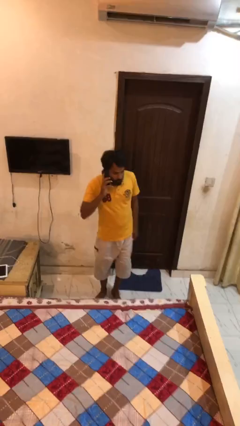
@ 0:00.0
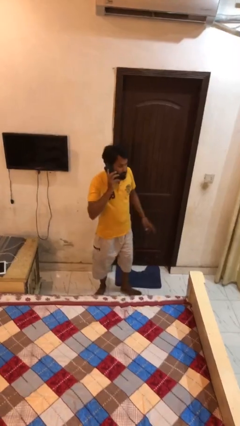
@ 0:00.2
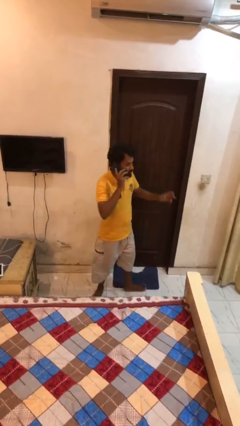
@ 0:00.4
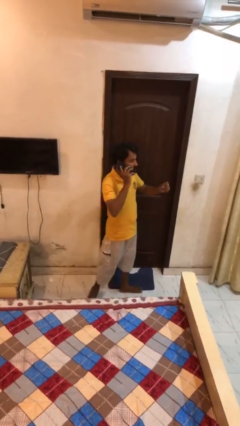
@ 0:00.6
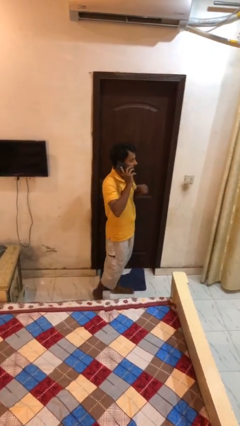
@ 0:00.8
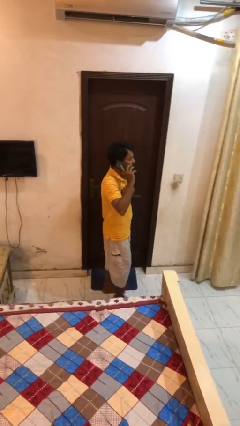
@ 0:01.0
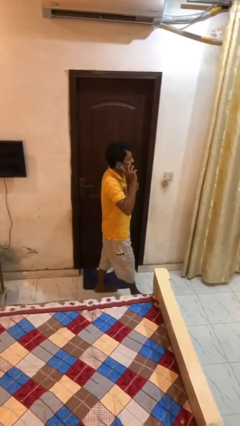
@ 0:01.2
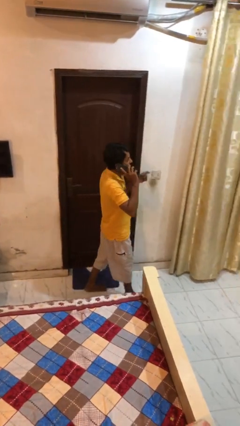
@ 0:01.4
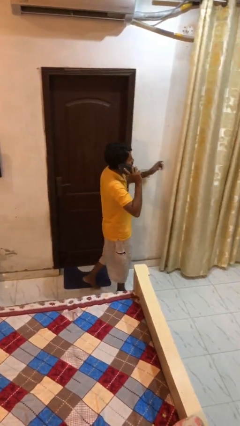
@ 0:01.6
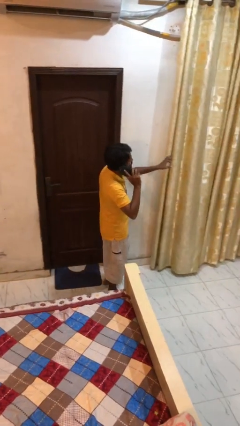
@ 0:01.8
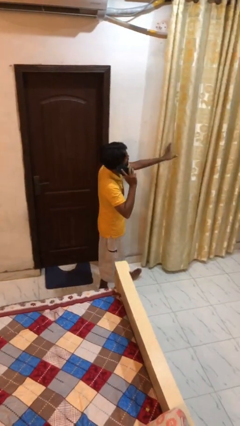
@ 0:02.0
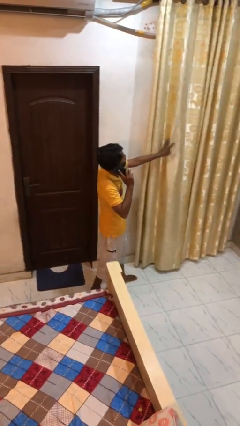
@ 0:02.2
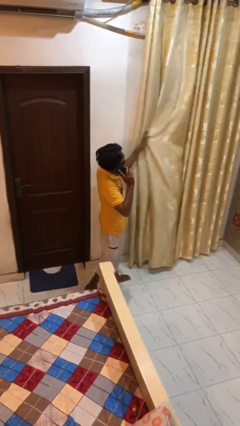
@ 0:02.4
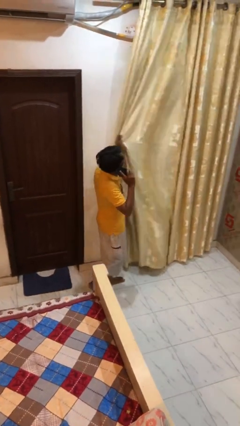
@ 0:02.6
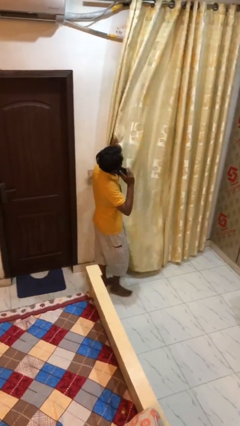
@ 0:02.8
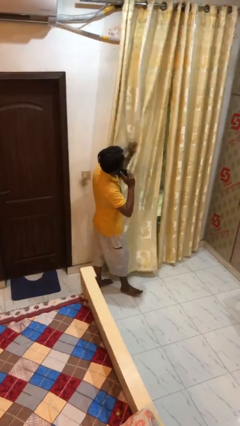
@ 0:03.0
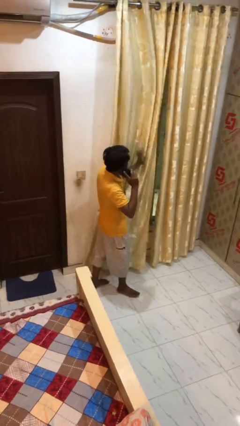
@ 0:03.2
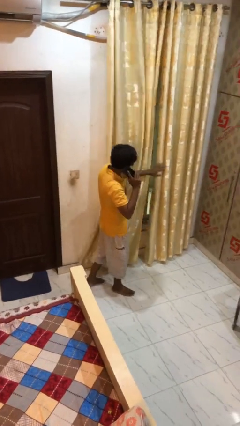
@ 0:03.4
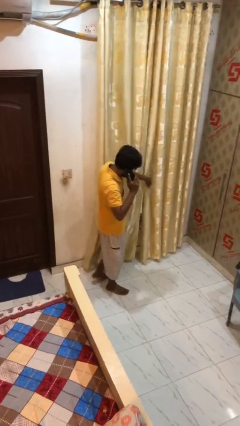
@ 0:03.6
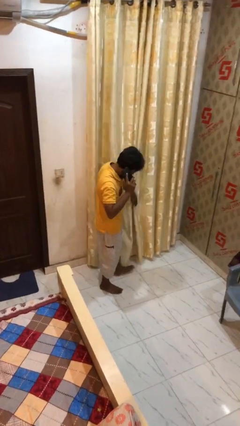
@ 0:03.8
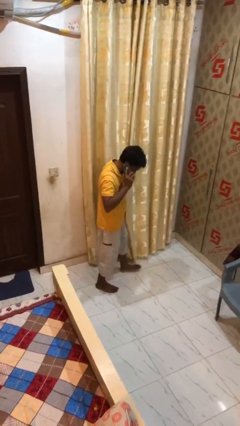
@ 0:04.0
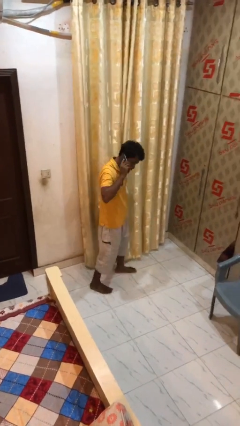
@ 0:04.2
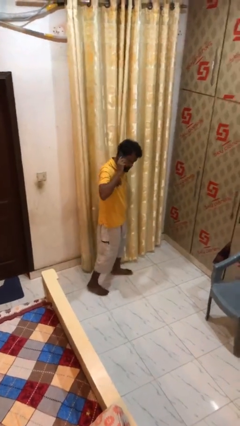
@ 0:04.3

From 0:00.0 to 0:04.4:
person talks on phone

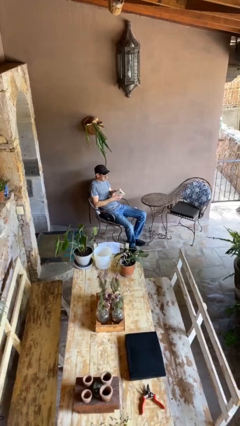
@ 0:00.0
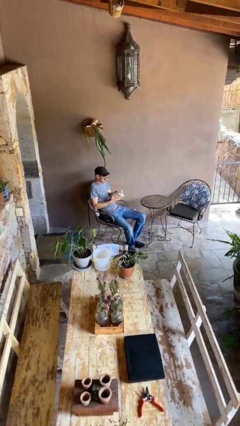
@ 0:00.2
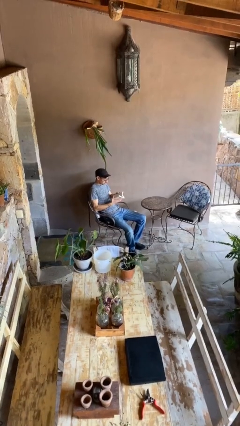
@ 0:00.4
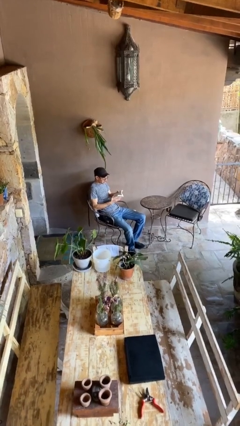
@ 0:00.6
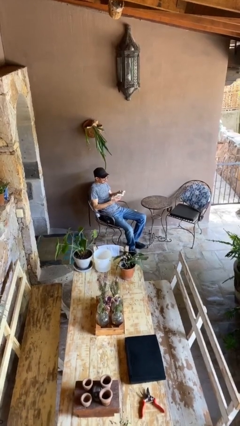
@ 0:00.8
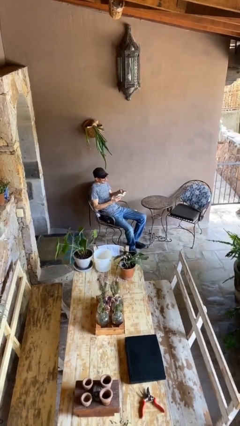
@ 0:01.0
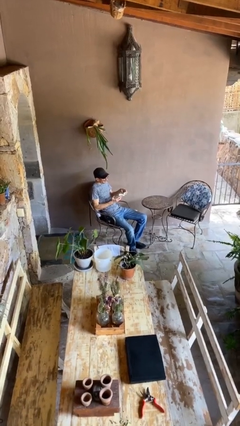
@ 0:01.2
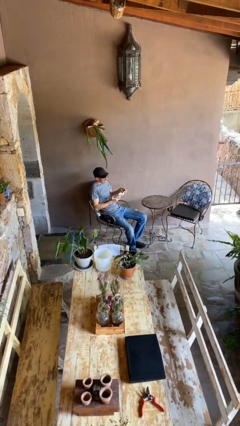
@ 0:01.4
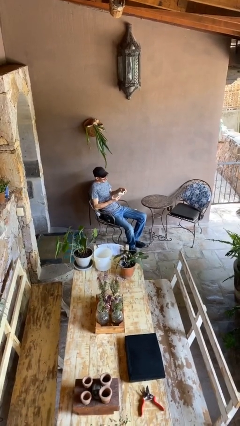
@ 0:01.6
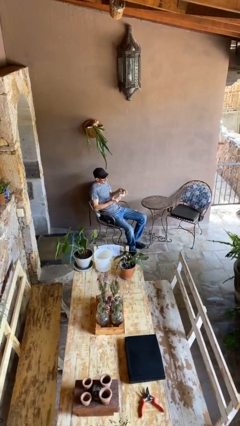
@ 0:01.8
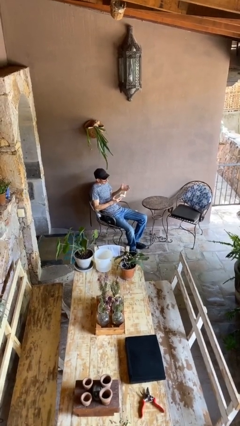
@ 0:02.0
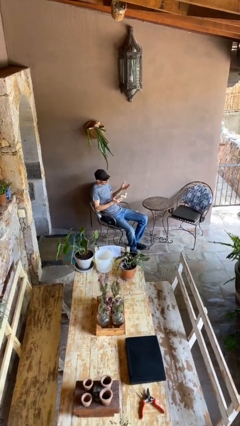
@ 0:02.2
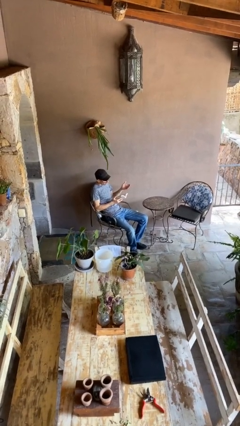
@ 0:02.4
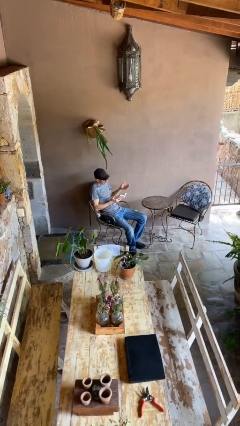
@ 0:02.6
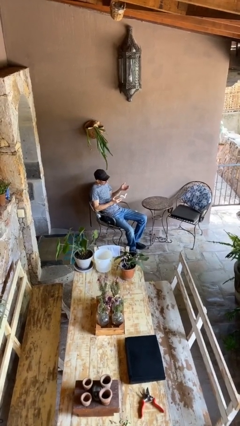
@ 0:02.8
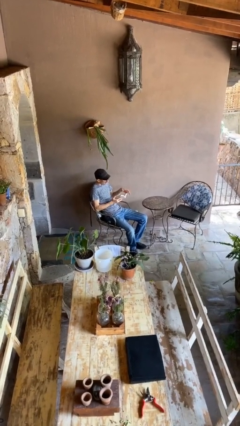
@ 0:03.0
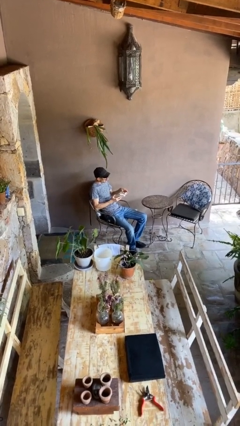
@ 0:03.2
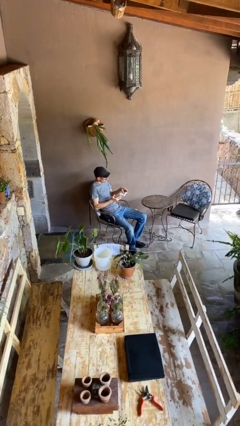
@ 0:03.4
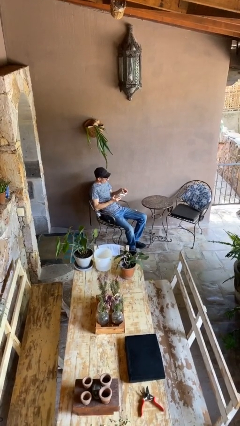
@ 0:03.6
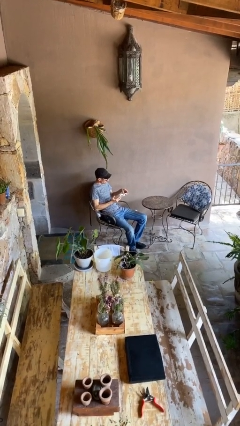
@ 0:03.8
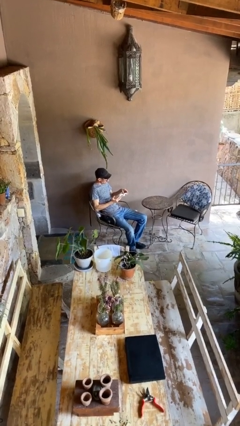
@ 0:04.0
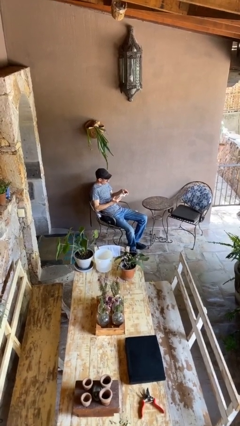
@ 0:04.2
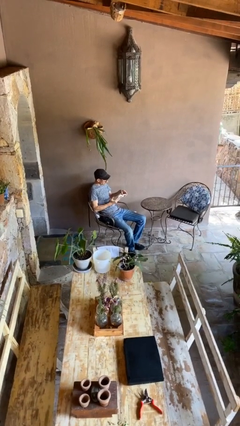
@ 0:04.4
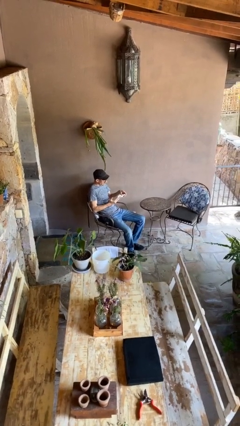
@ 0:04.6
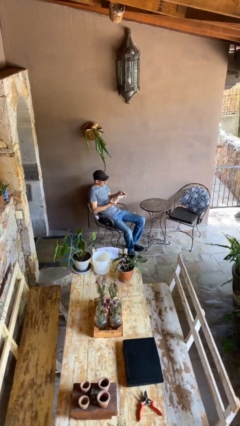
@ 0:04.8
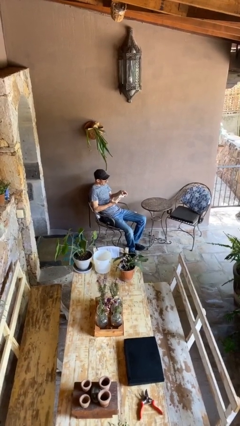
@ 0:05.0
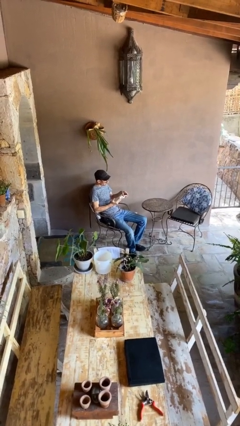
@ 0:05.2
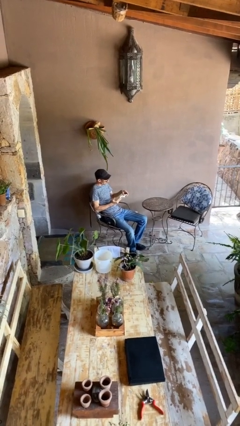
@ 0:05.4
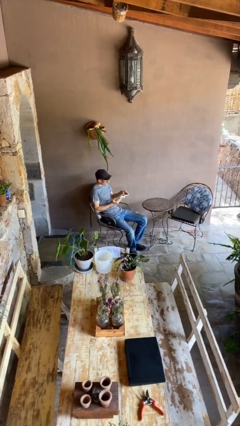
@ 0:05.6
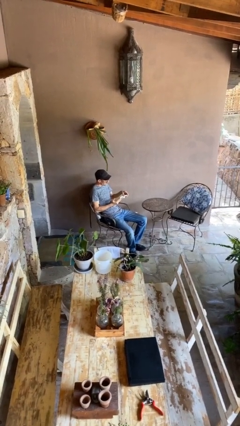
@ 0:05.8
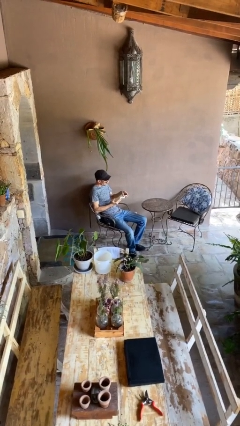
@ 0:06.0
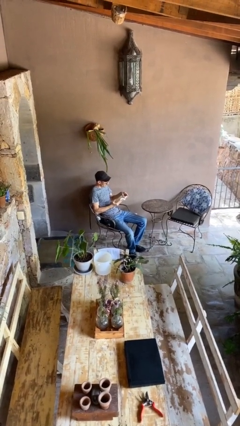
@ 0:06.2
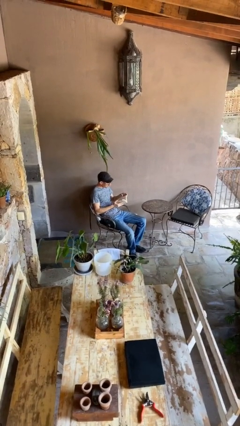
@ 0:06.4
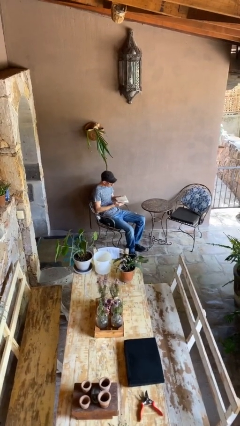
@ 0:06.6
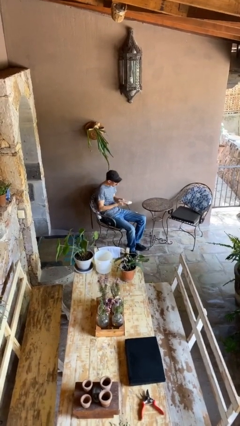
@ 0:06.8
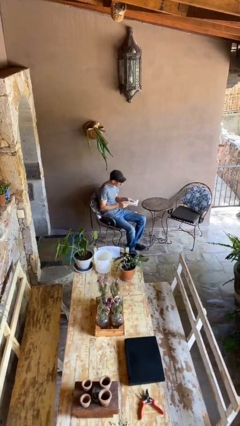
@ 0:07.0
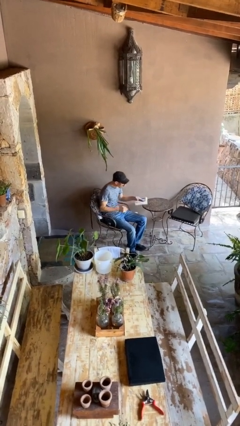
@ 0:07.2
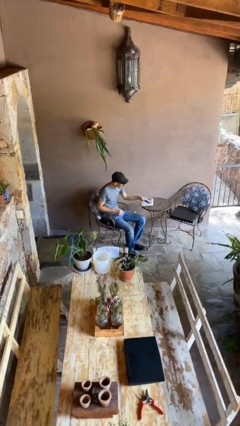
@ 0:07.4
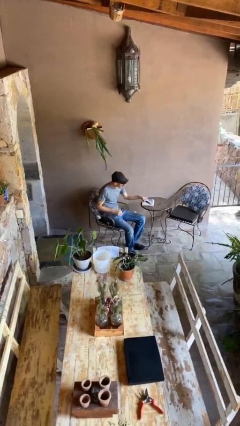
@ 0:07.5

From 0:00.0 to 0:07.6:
person reads document

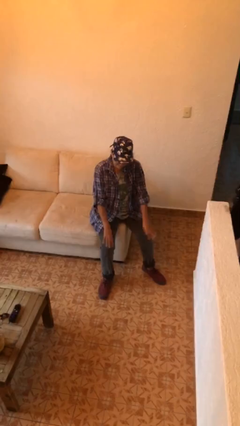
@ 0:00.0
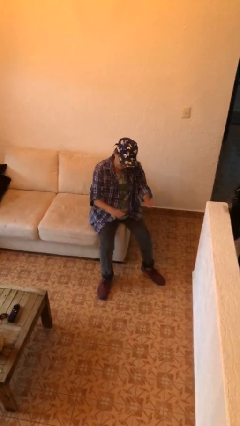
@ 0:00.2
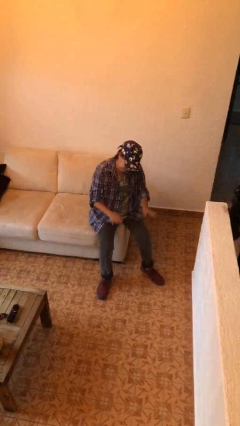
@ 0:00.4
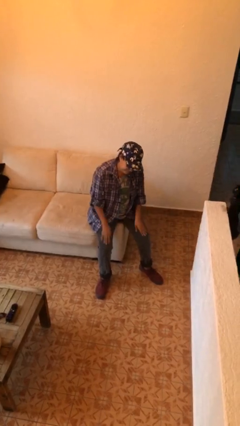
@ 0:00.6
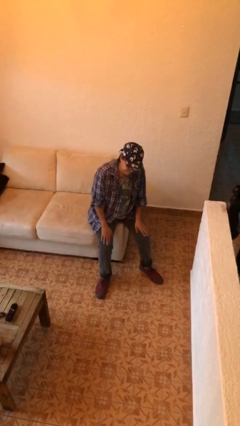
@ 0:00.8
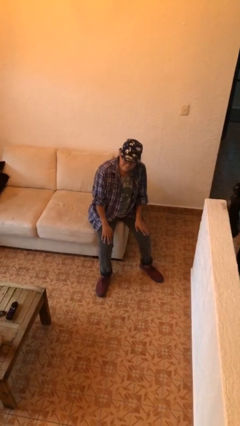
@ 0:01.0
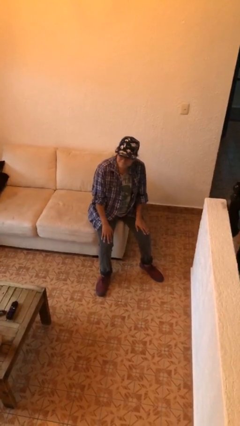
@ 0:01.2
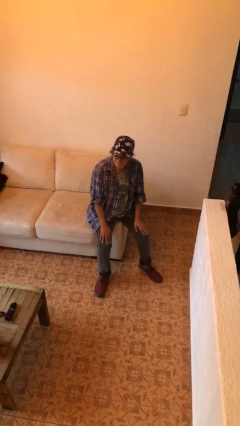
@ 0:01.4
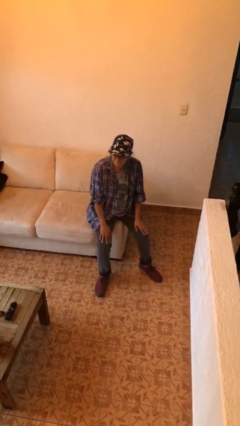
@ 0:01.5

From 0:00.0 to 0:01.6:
person slaps hands on thighs

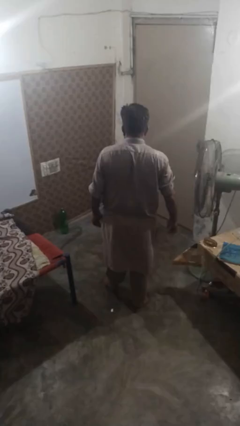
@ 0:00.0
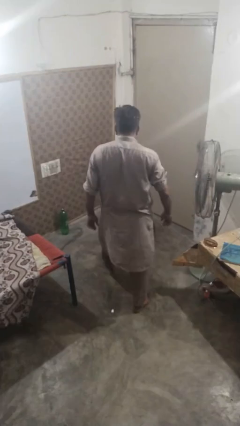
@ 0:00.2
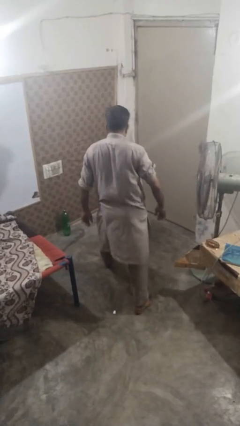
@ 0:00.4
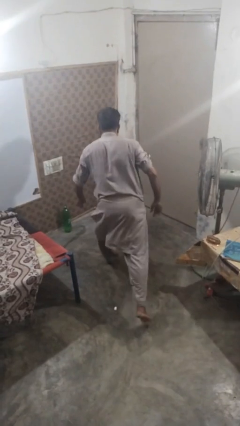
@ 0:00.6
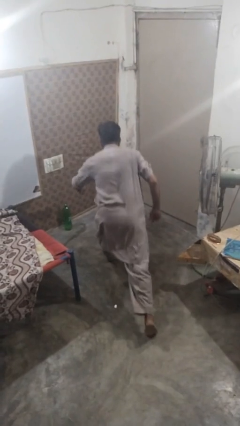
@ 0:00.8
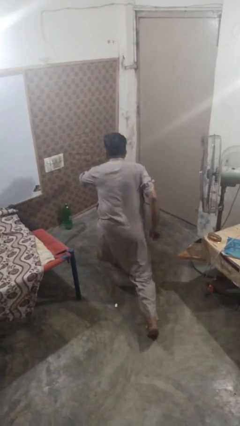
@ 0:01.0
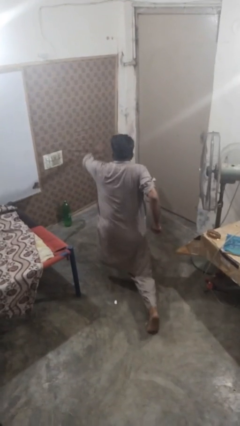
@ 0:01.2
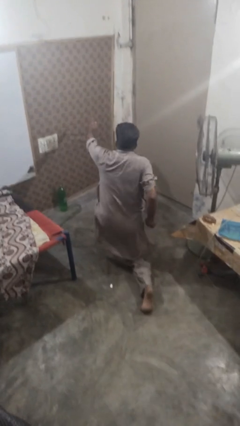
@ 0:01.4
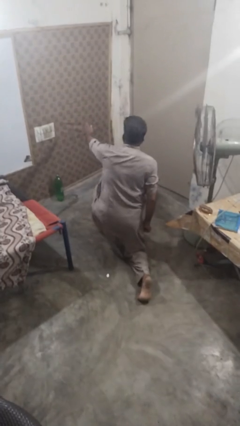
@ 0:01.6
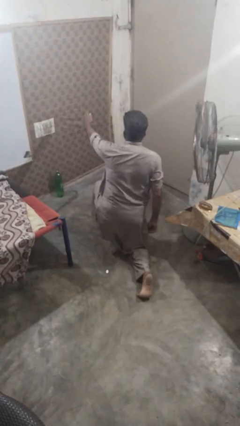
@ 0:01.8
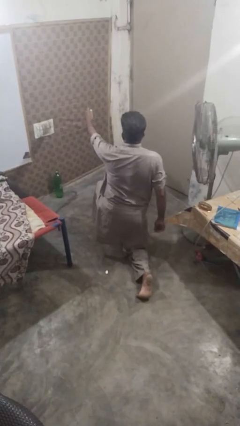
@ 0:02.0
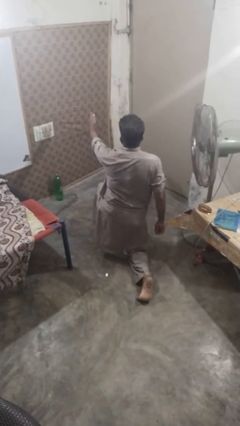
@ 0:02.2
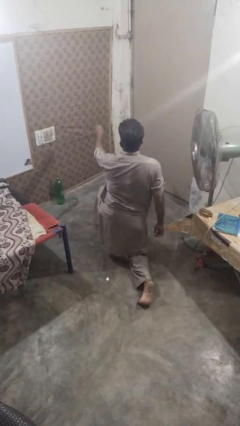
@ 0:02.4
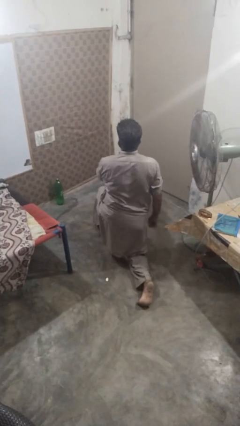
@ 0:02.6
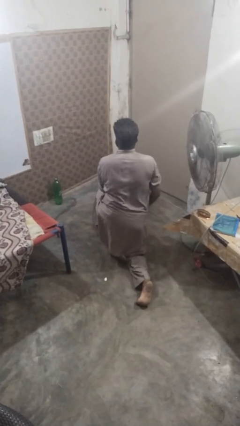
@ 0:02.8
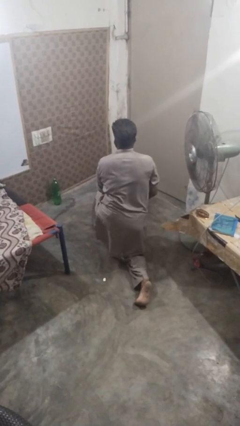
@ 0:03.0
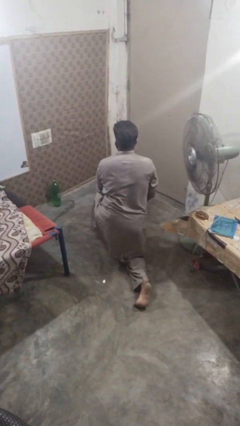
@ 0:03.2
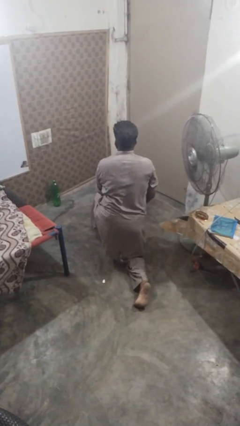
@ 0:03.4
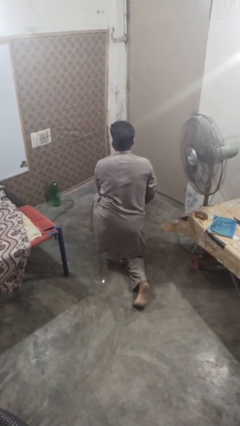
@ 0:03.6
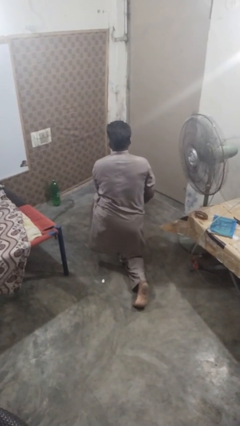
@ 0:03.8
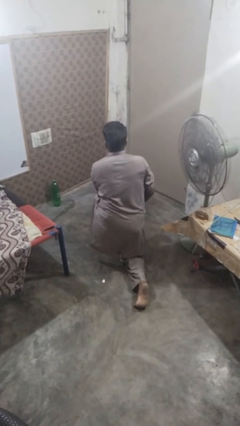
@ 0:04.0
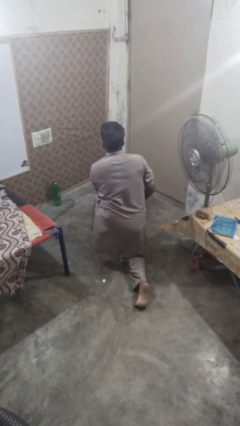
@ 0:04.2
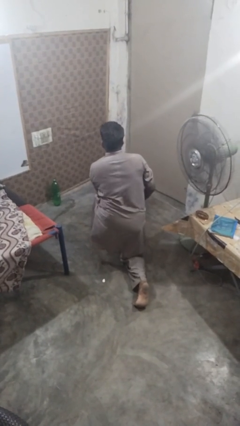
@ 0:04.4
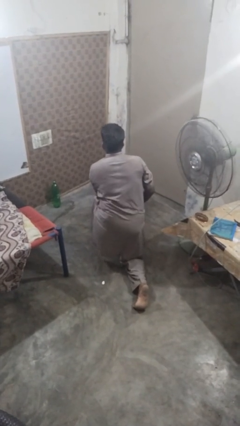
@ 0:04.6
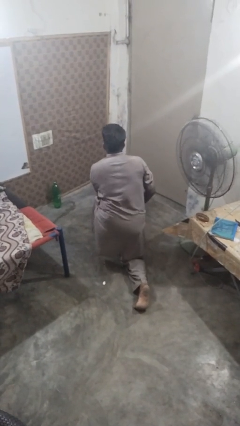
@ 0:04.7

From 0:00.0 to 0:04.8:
person kneels
